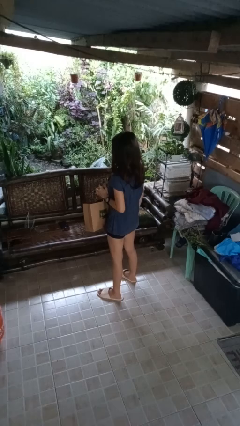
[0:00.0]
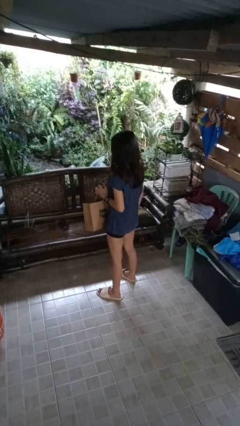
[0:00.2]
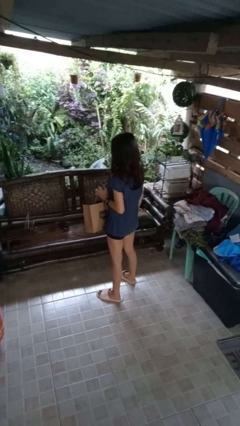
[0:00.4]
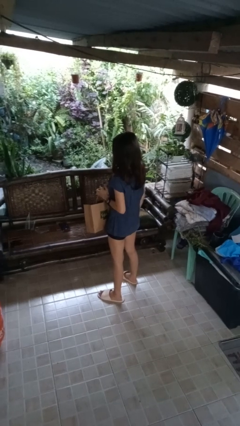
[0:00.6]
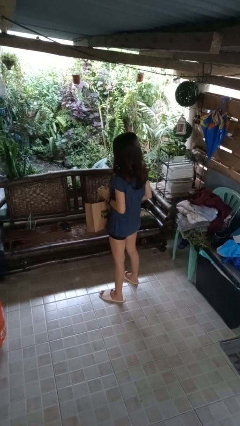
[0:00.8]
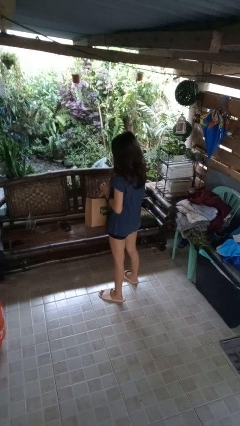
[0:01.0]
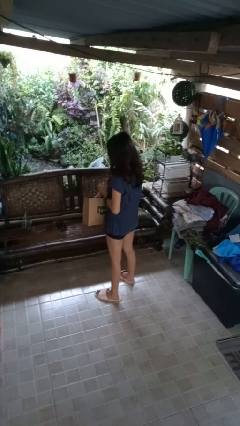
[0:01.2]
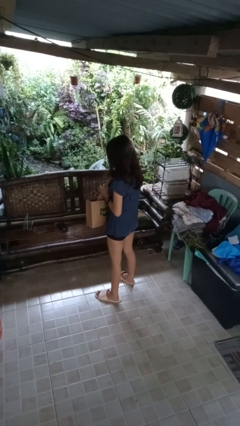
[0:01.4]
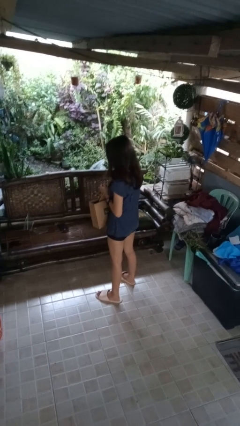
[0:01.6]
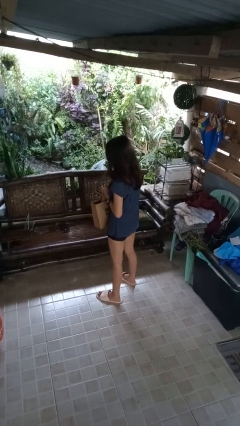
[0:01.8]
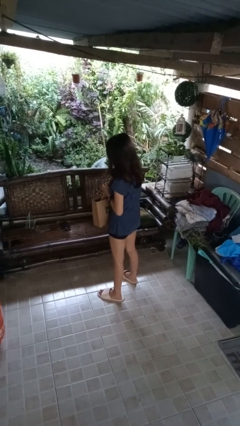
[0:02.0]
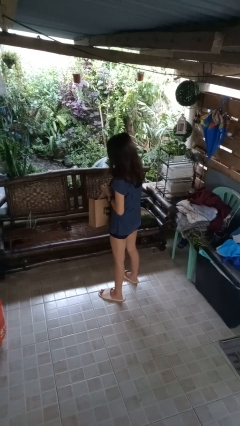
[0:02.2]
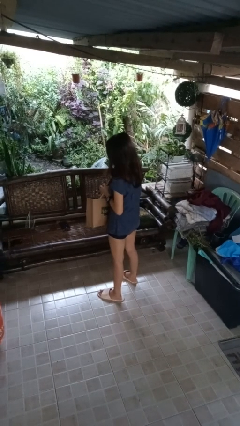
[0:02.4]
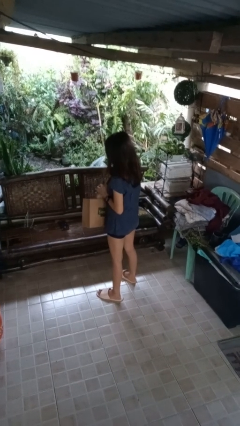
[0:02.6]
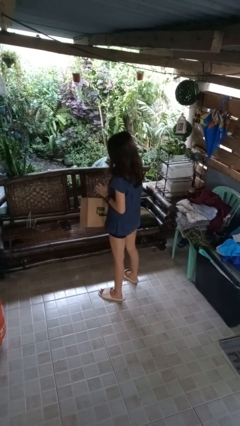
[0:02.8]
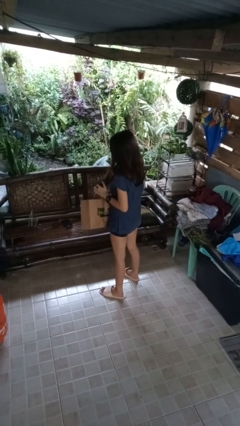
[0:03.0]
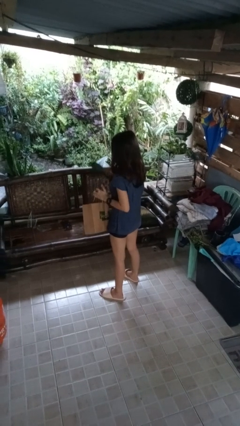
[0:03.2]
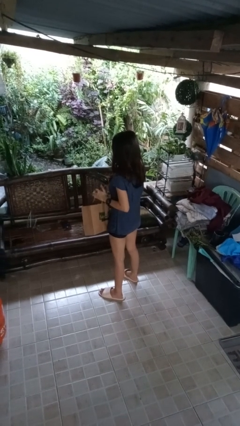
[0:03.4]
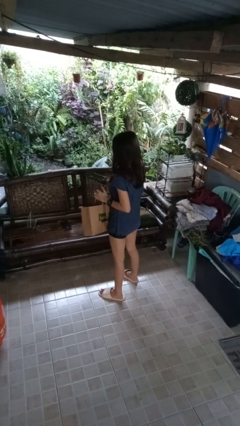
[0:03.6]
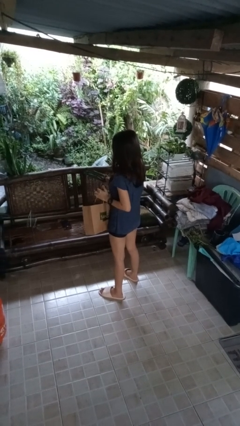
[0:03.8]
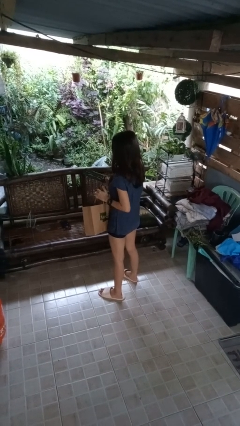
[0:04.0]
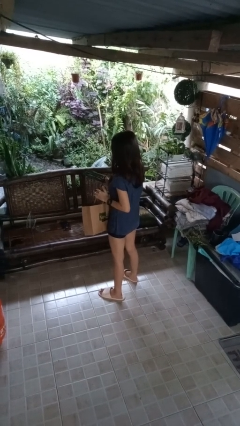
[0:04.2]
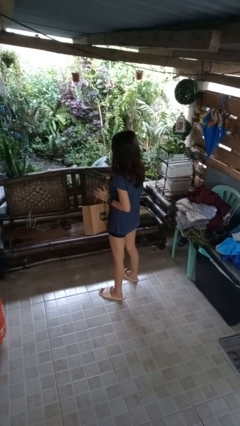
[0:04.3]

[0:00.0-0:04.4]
person takes object from bag

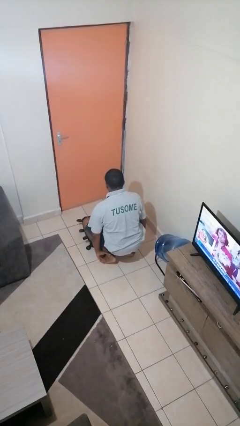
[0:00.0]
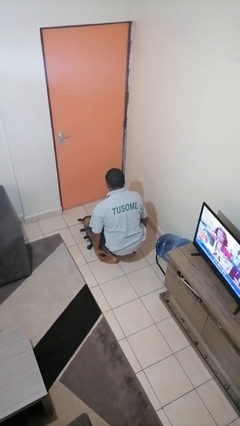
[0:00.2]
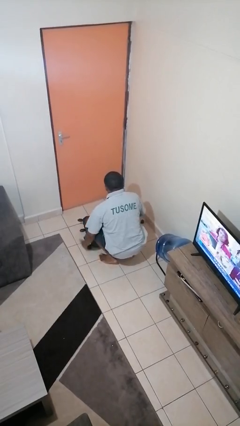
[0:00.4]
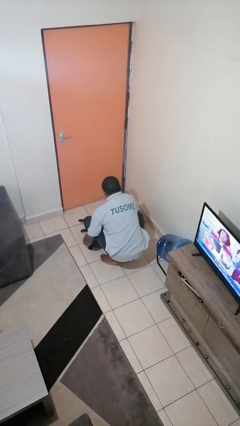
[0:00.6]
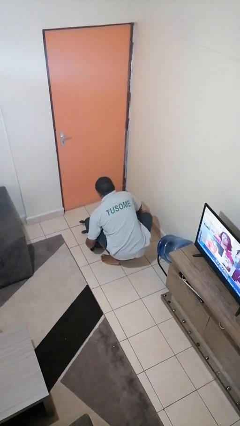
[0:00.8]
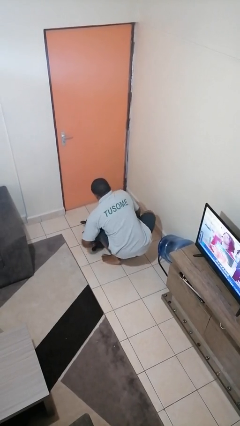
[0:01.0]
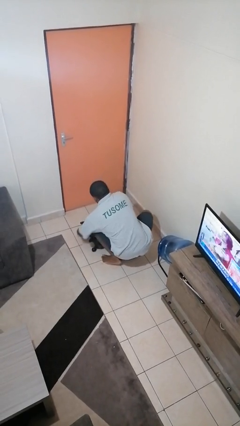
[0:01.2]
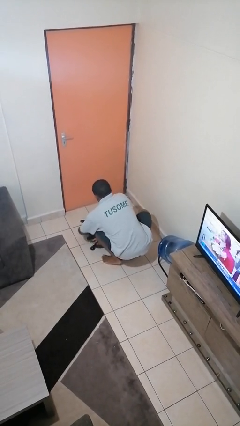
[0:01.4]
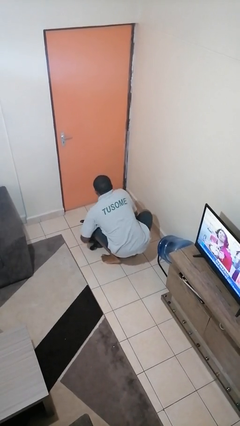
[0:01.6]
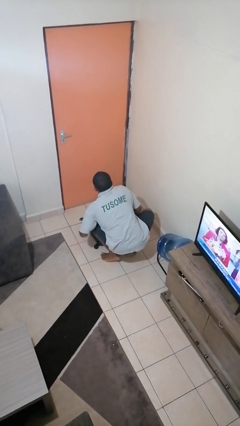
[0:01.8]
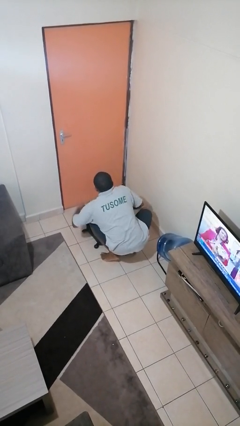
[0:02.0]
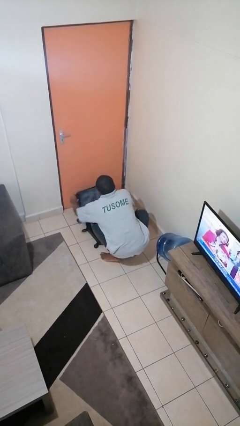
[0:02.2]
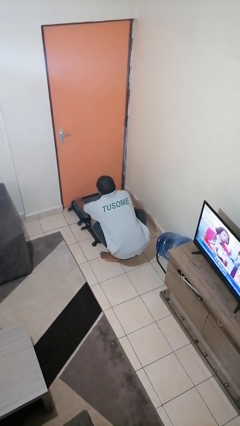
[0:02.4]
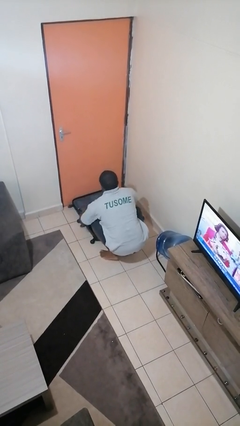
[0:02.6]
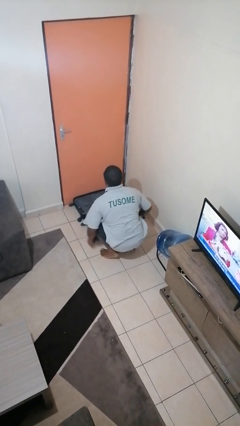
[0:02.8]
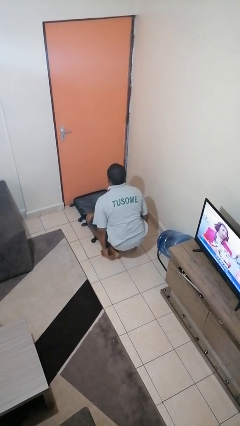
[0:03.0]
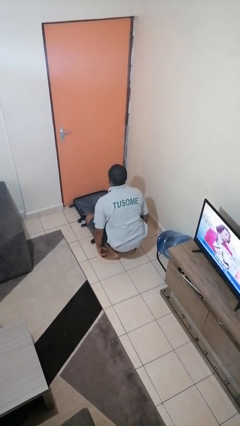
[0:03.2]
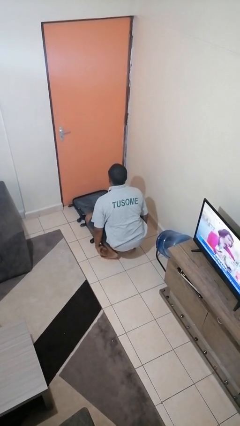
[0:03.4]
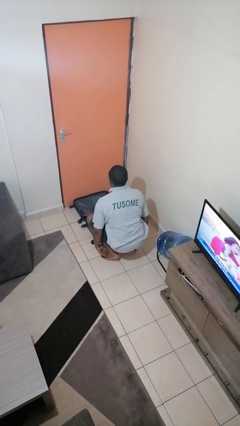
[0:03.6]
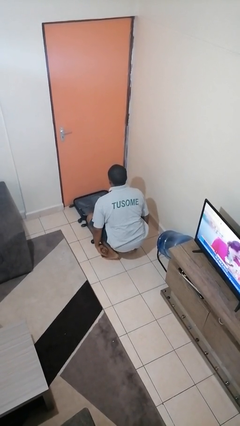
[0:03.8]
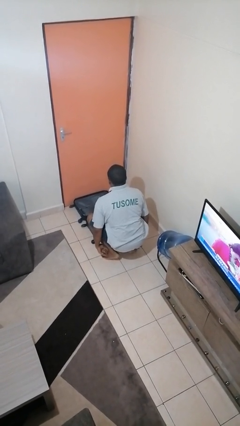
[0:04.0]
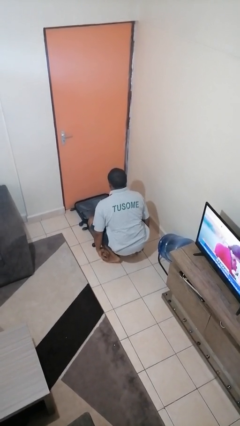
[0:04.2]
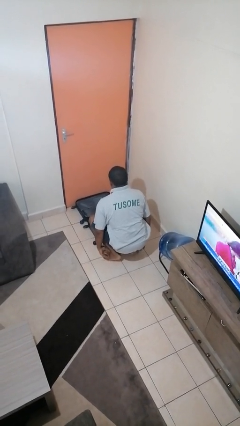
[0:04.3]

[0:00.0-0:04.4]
person opens suitcase

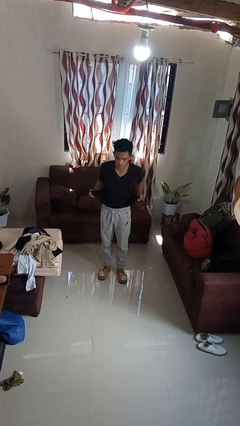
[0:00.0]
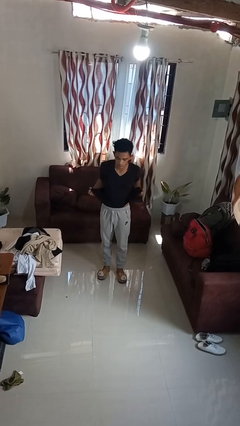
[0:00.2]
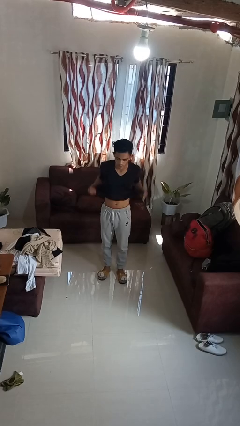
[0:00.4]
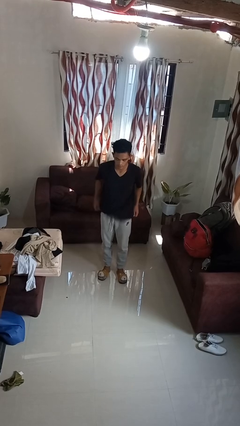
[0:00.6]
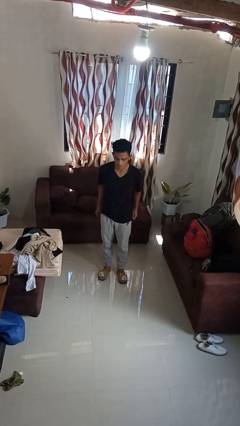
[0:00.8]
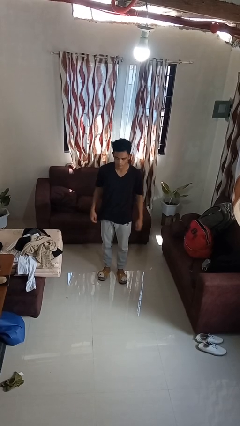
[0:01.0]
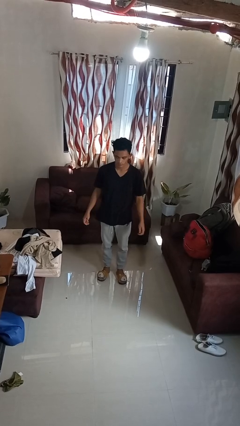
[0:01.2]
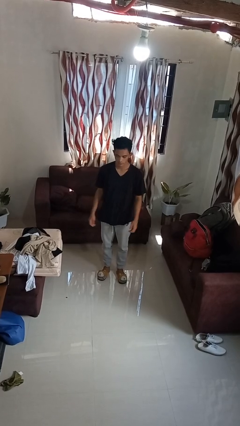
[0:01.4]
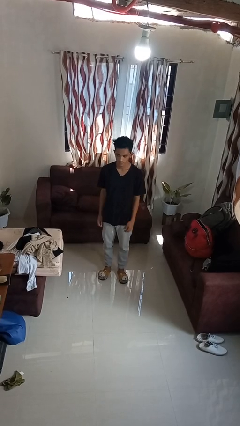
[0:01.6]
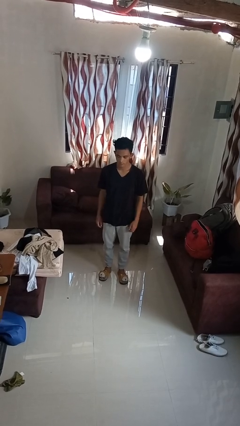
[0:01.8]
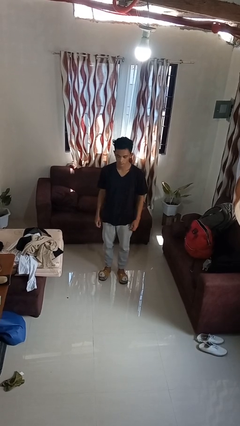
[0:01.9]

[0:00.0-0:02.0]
person untucks shirt

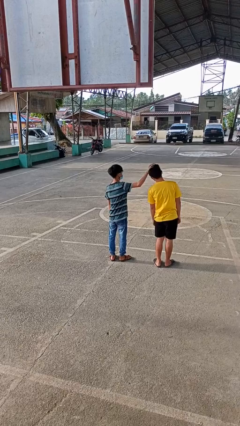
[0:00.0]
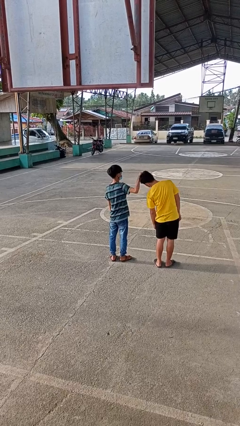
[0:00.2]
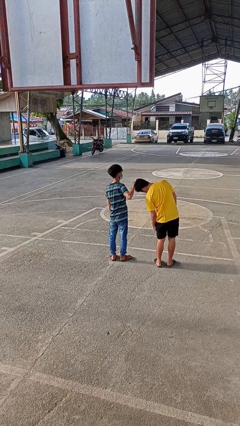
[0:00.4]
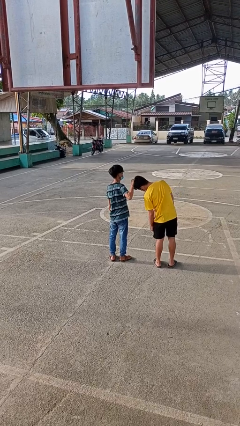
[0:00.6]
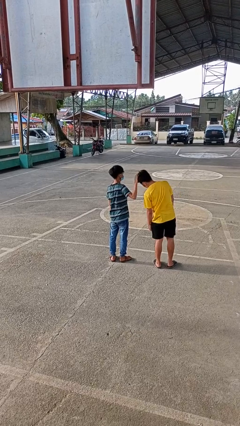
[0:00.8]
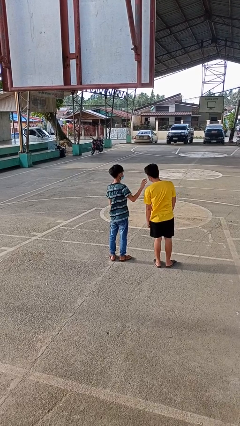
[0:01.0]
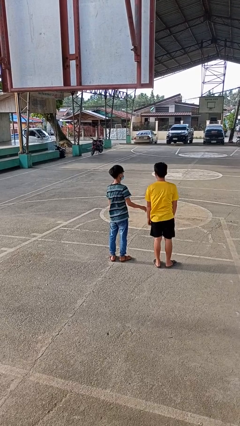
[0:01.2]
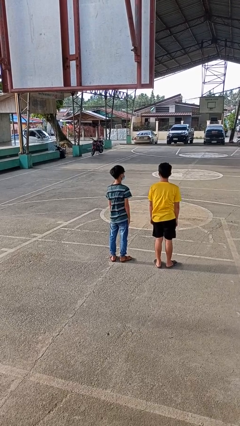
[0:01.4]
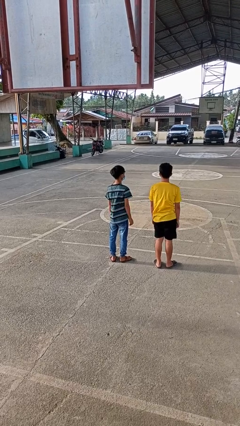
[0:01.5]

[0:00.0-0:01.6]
person grabs person by hair

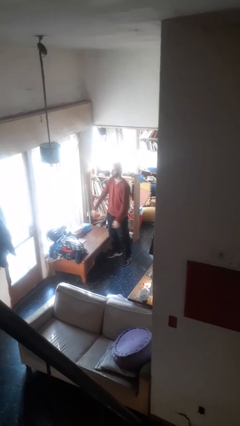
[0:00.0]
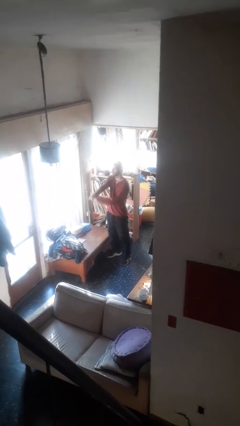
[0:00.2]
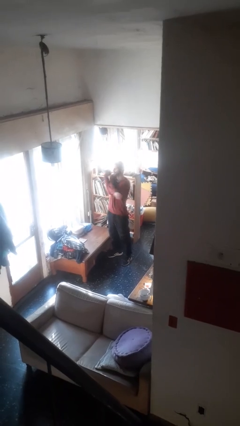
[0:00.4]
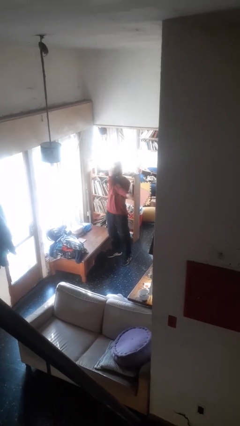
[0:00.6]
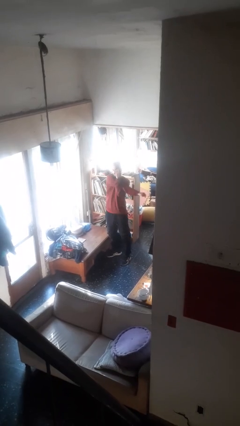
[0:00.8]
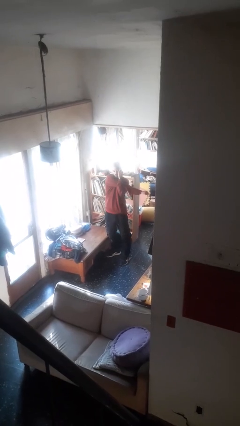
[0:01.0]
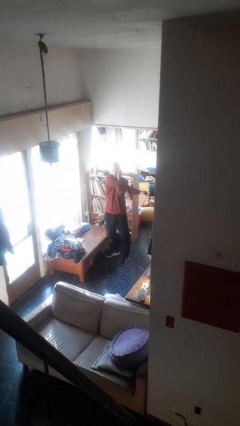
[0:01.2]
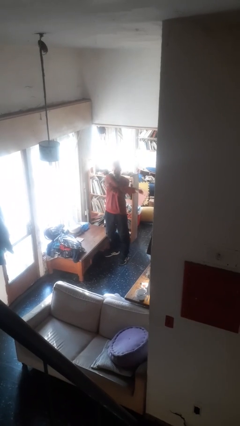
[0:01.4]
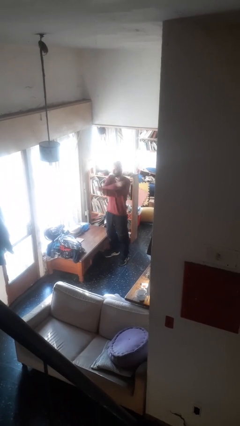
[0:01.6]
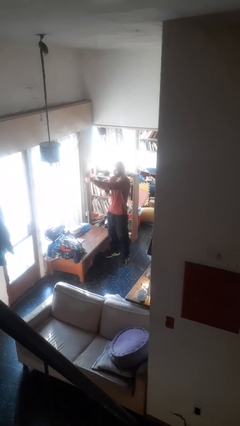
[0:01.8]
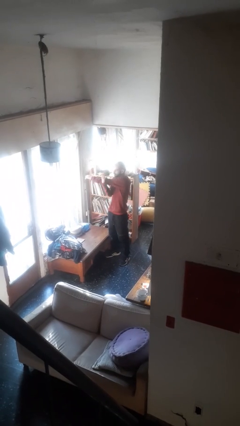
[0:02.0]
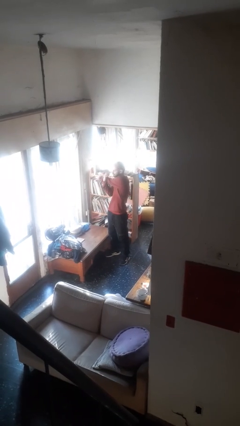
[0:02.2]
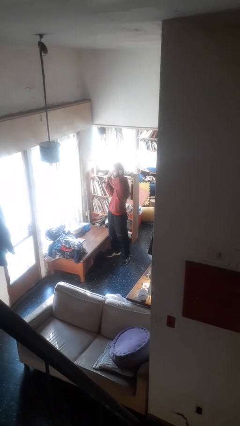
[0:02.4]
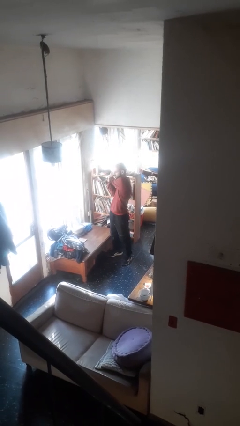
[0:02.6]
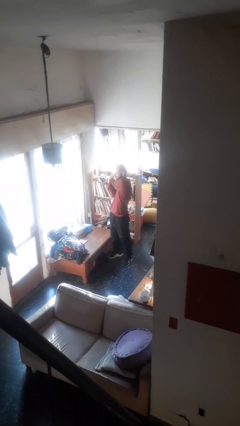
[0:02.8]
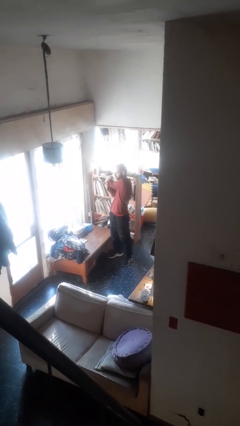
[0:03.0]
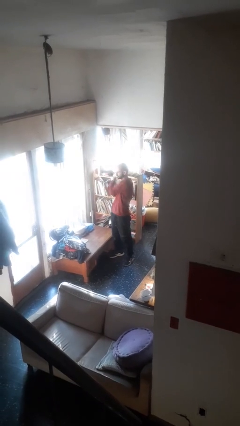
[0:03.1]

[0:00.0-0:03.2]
person stretches arms to side

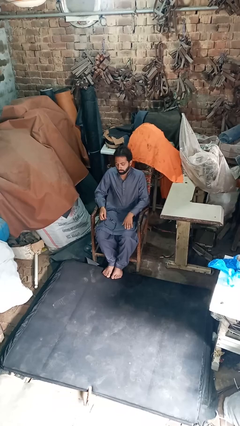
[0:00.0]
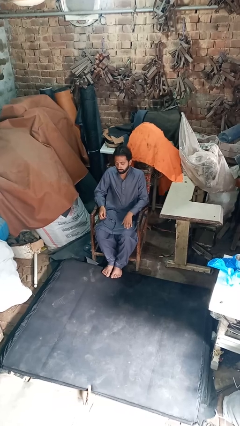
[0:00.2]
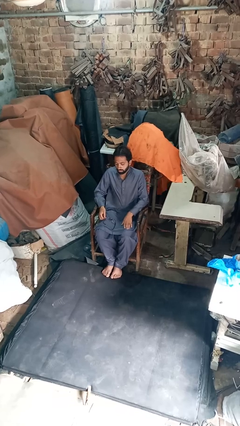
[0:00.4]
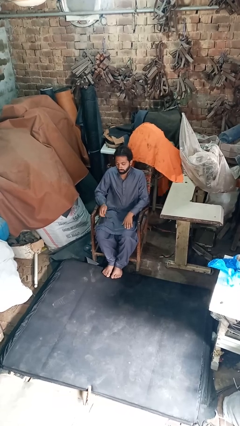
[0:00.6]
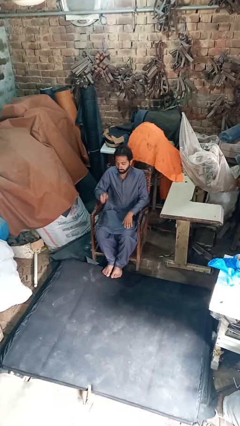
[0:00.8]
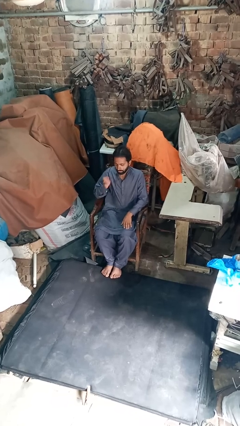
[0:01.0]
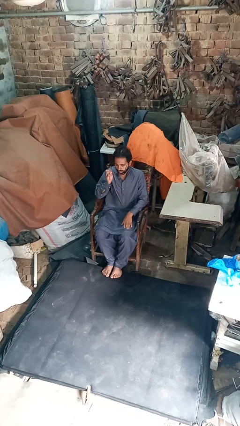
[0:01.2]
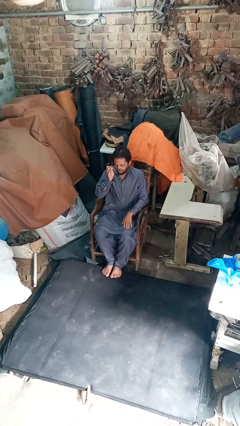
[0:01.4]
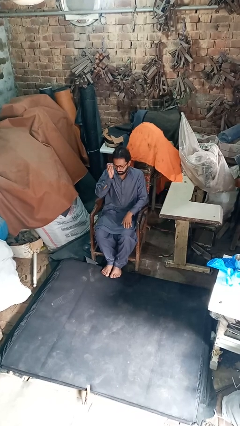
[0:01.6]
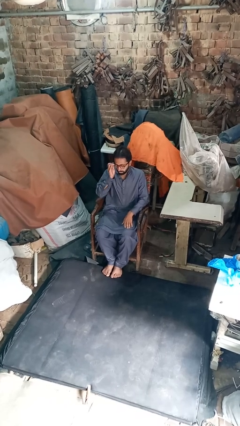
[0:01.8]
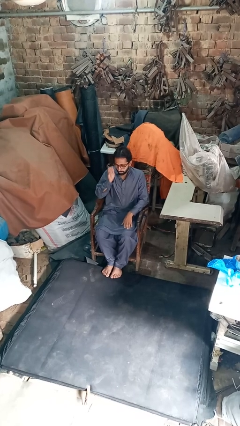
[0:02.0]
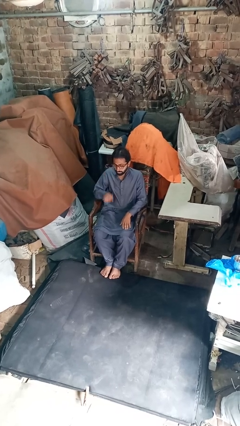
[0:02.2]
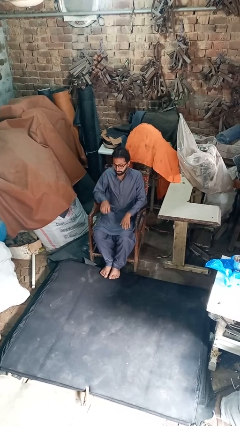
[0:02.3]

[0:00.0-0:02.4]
person puts on glasses
